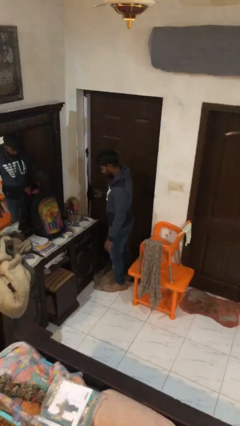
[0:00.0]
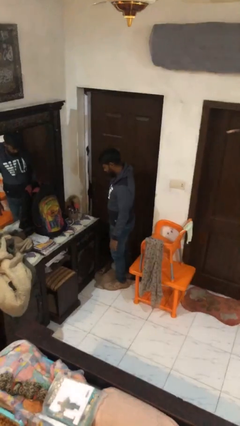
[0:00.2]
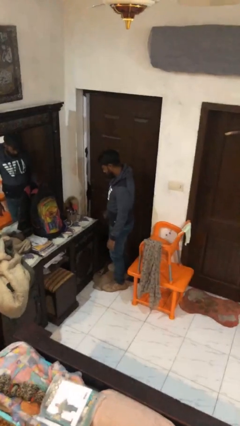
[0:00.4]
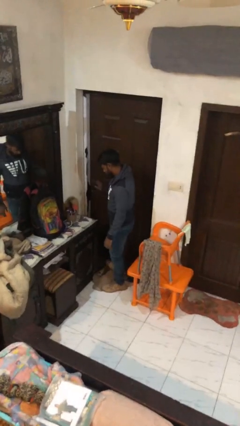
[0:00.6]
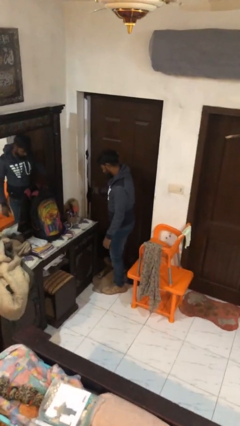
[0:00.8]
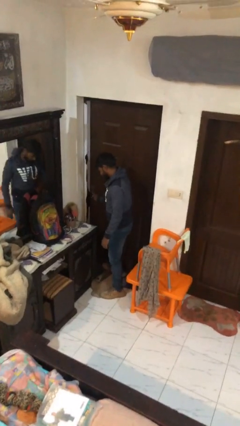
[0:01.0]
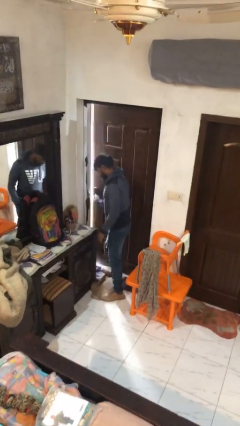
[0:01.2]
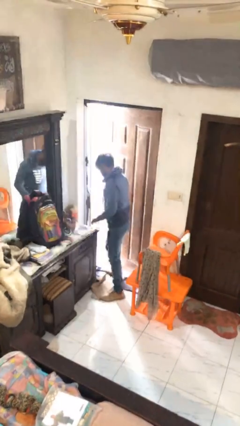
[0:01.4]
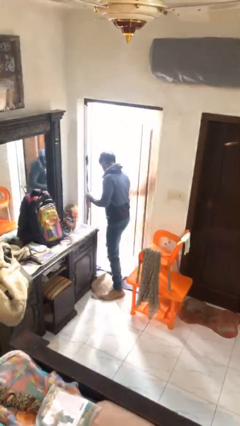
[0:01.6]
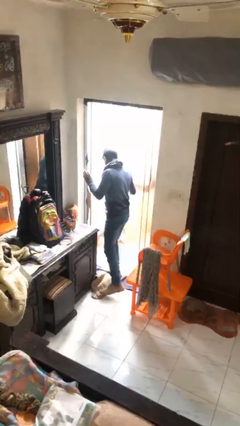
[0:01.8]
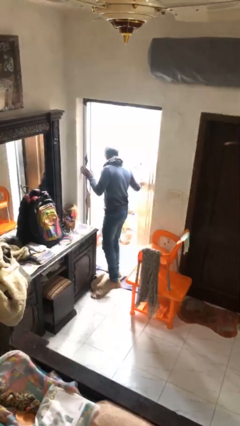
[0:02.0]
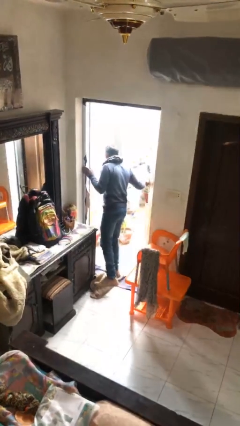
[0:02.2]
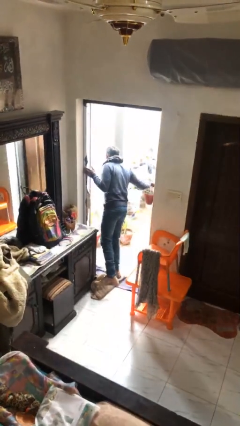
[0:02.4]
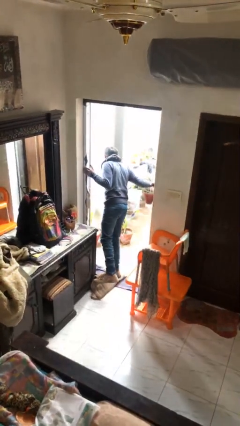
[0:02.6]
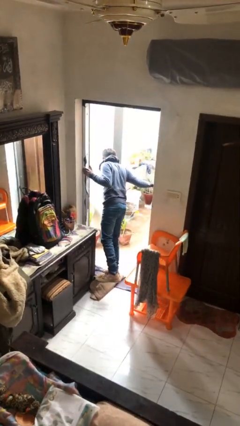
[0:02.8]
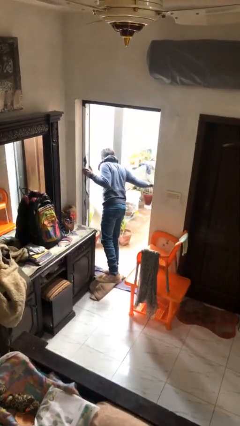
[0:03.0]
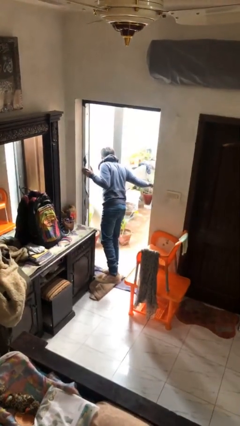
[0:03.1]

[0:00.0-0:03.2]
person opens facility door

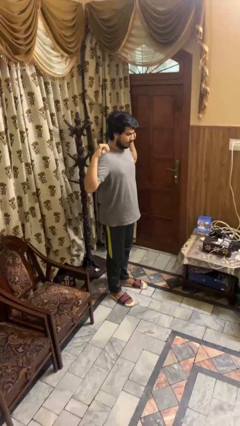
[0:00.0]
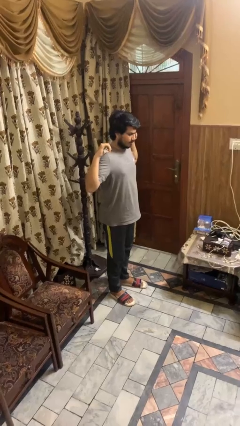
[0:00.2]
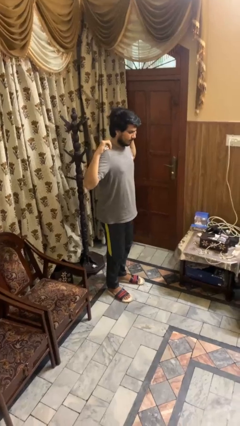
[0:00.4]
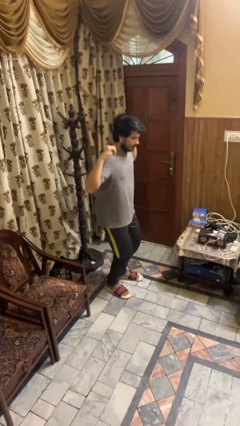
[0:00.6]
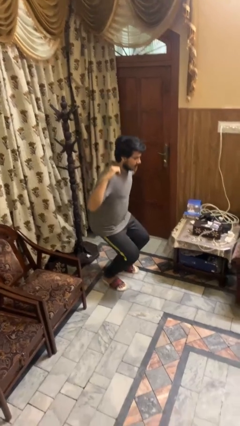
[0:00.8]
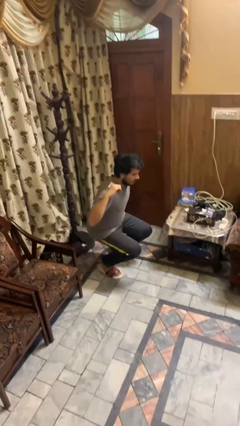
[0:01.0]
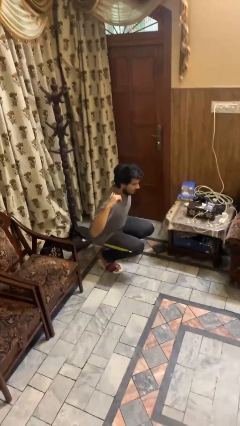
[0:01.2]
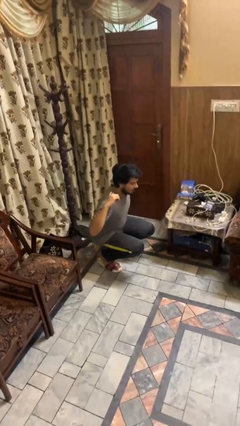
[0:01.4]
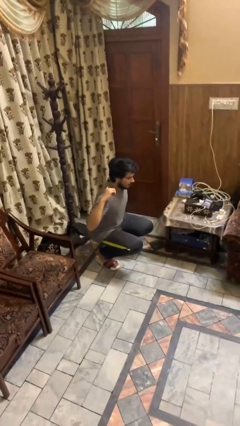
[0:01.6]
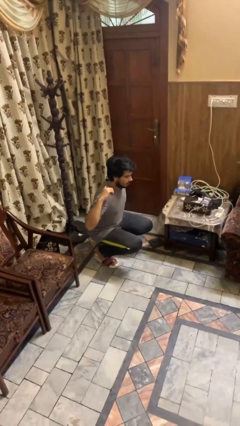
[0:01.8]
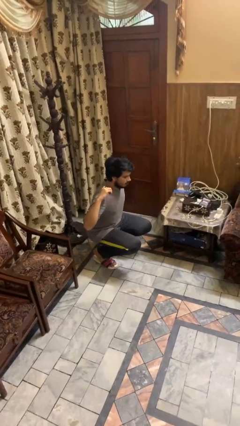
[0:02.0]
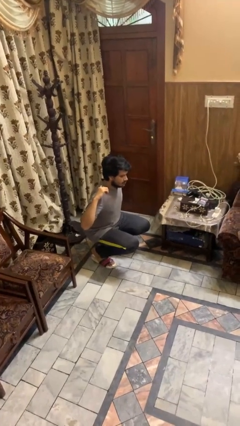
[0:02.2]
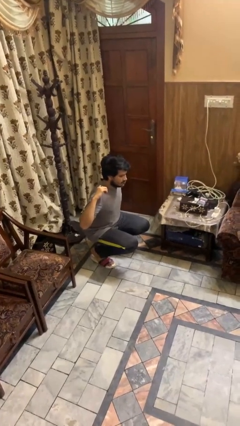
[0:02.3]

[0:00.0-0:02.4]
person squats

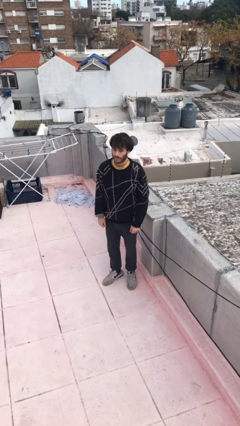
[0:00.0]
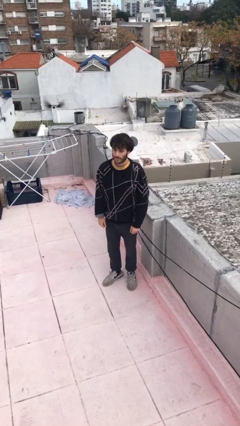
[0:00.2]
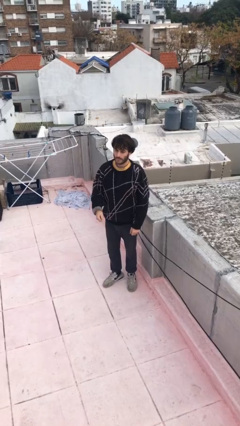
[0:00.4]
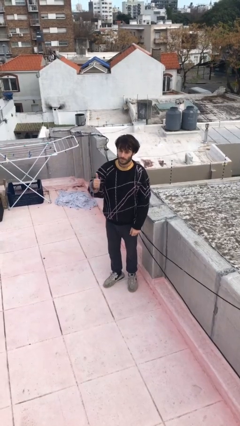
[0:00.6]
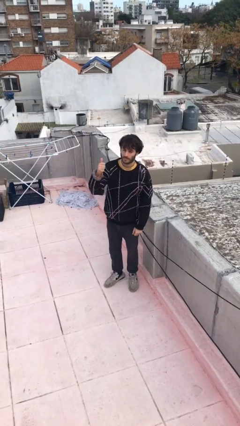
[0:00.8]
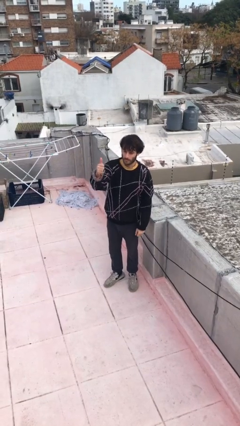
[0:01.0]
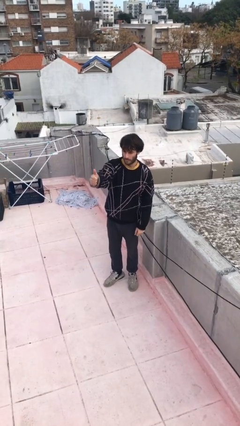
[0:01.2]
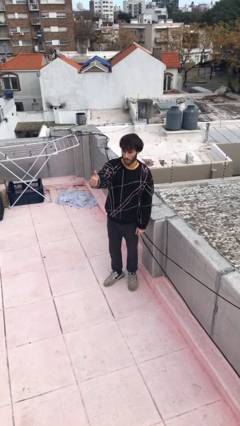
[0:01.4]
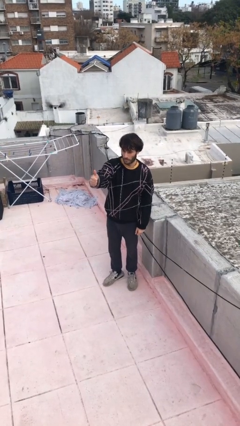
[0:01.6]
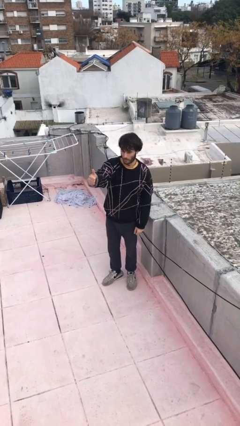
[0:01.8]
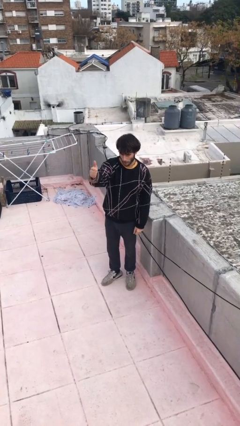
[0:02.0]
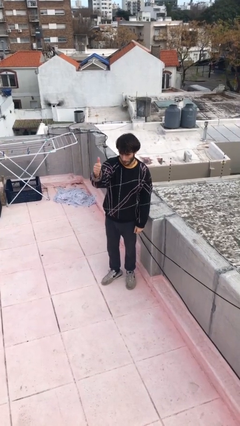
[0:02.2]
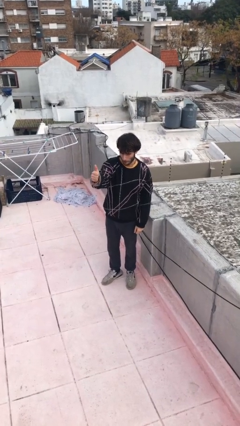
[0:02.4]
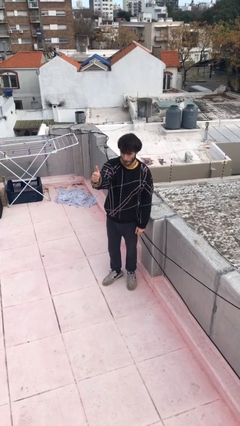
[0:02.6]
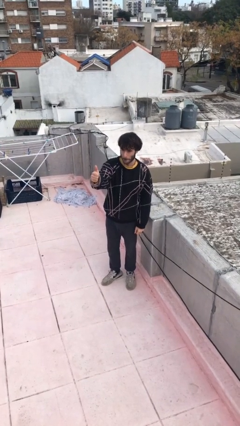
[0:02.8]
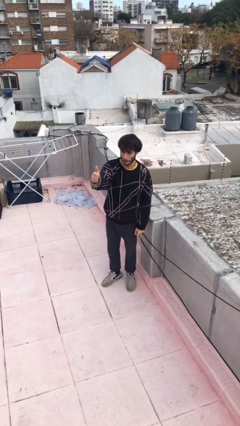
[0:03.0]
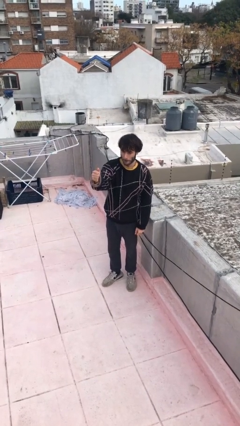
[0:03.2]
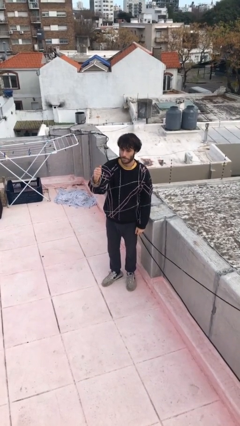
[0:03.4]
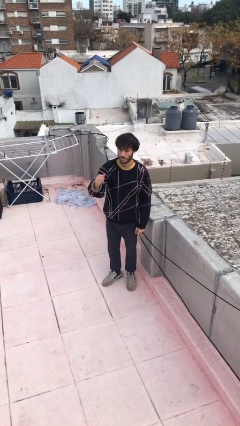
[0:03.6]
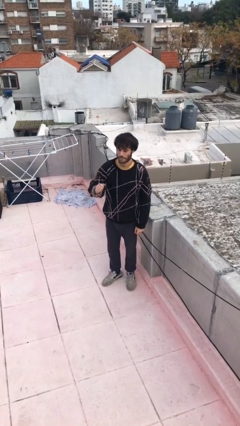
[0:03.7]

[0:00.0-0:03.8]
person gestures thumbs up

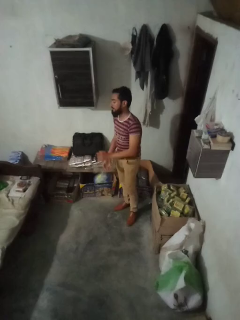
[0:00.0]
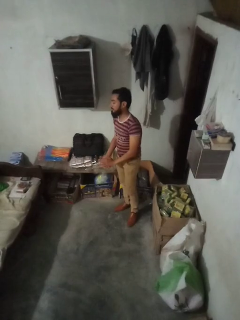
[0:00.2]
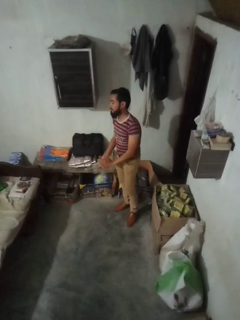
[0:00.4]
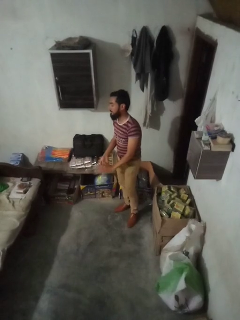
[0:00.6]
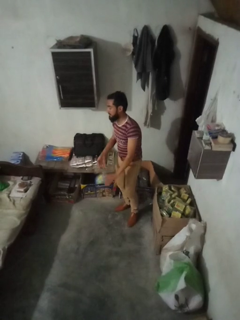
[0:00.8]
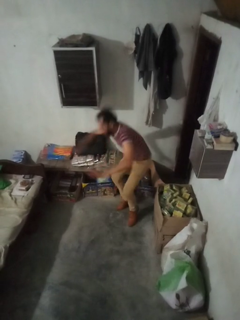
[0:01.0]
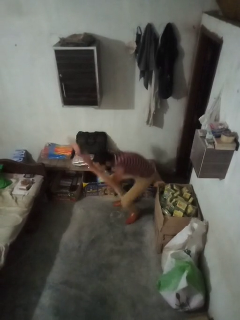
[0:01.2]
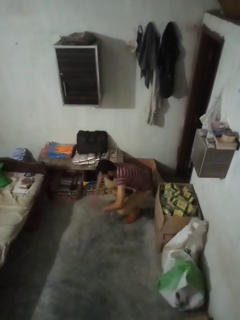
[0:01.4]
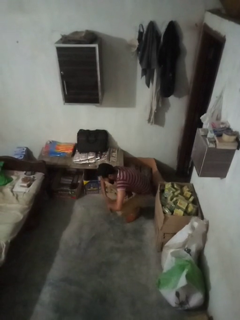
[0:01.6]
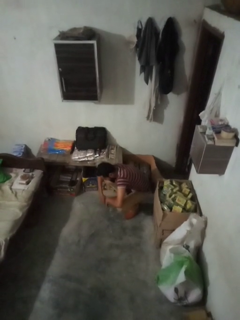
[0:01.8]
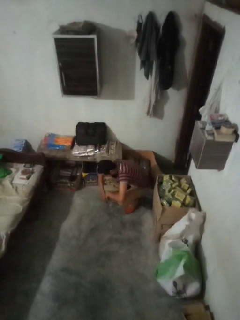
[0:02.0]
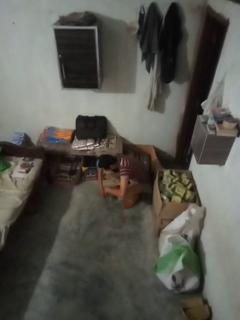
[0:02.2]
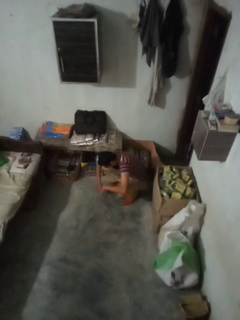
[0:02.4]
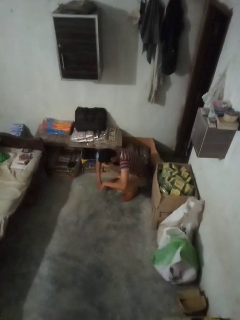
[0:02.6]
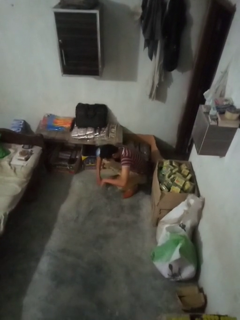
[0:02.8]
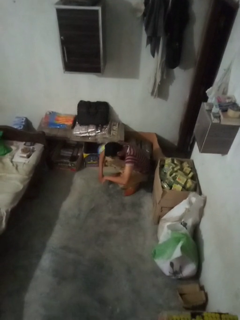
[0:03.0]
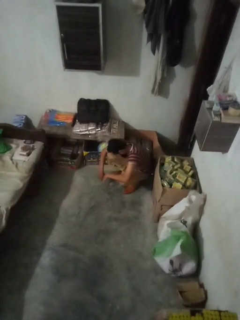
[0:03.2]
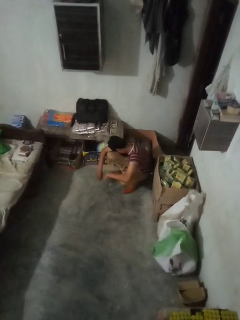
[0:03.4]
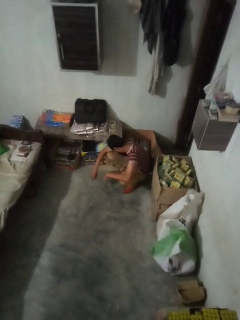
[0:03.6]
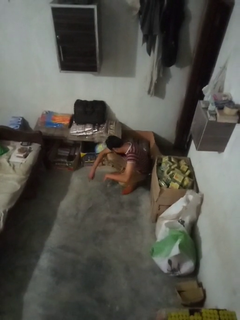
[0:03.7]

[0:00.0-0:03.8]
person trips on object on floor

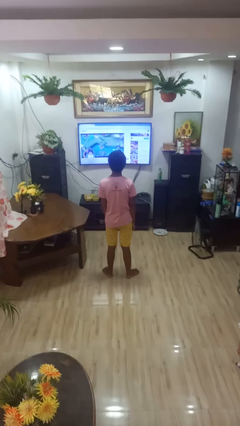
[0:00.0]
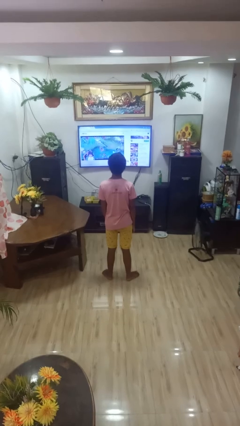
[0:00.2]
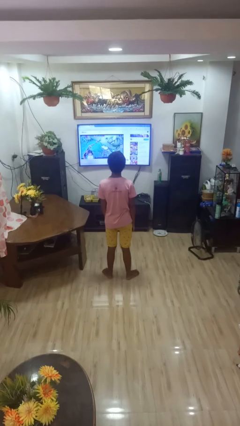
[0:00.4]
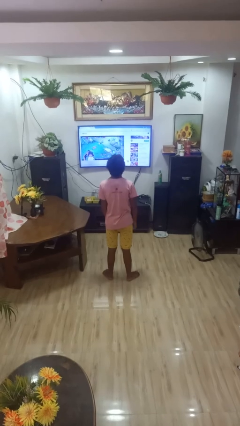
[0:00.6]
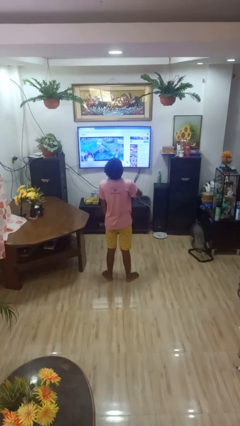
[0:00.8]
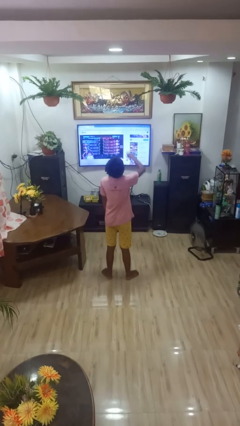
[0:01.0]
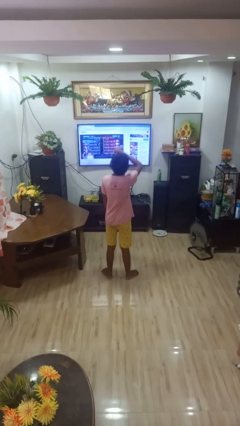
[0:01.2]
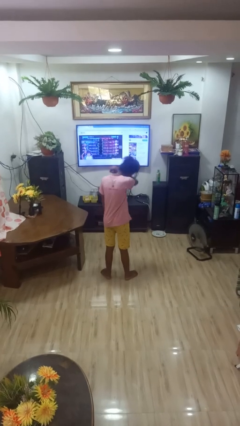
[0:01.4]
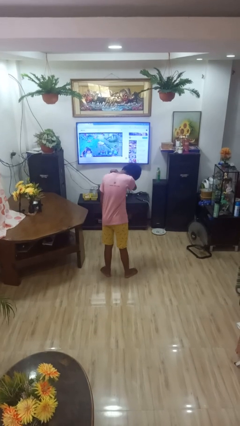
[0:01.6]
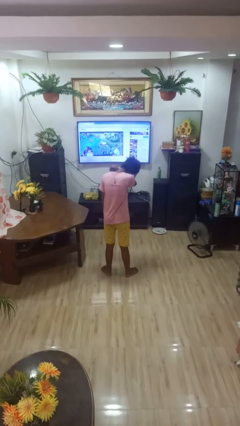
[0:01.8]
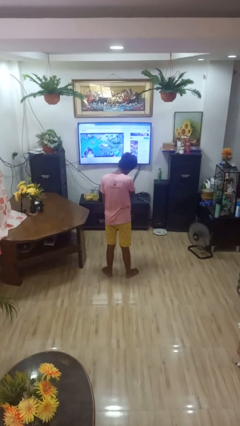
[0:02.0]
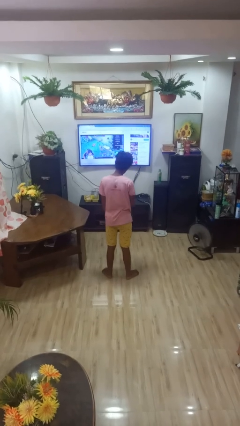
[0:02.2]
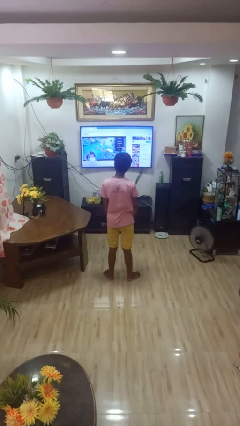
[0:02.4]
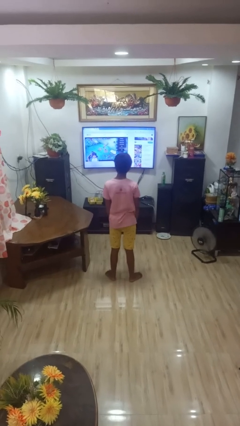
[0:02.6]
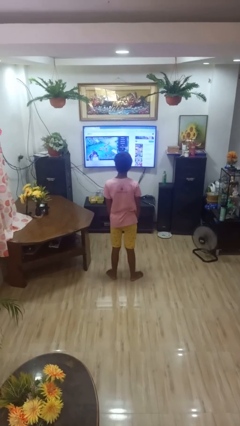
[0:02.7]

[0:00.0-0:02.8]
person sneezes into arm

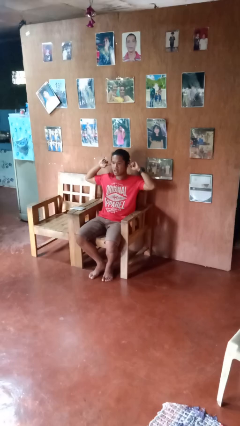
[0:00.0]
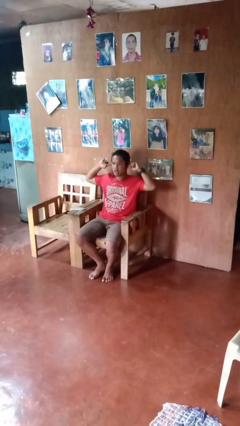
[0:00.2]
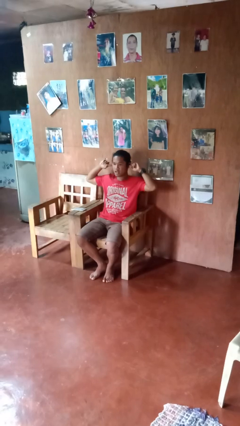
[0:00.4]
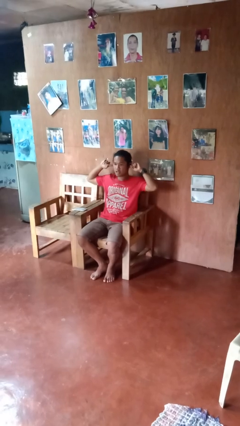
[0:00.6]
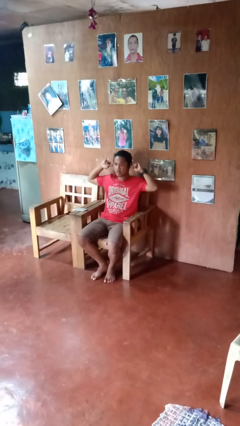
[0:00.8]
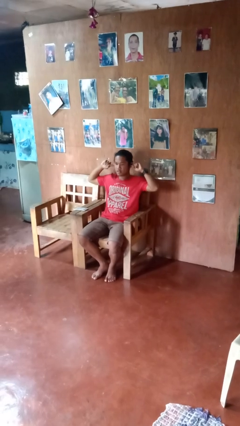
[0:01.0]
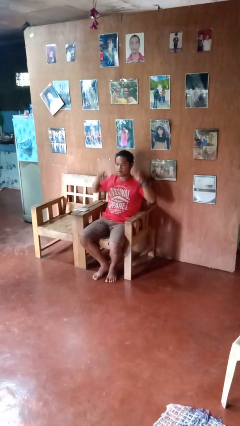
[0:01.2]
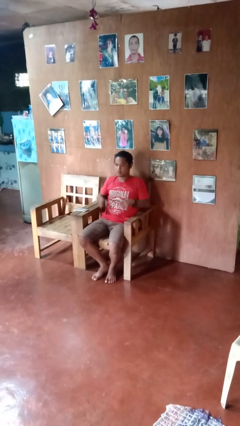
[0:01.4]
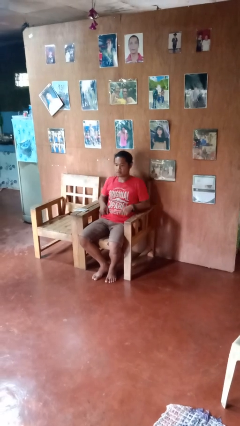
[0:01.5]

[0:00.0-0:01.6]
person puts fingers in ear

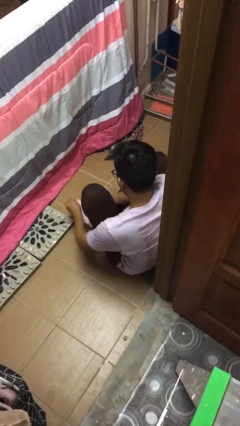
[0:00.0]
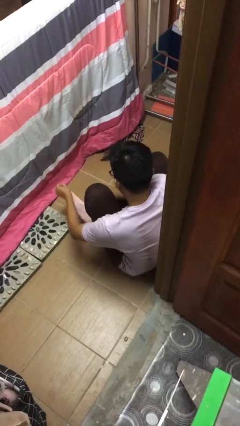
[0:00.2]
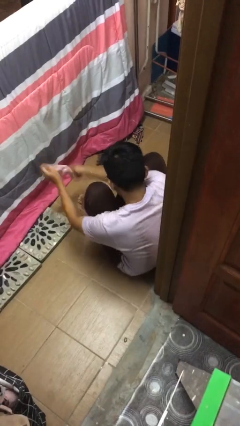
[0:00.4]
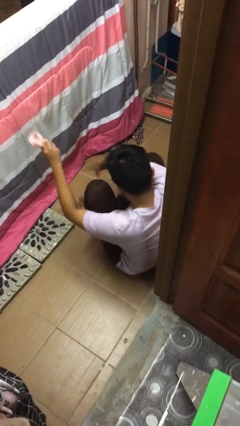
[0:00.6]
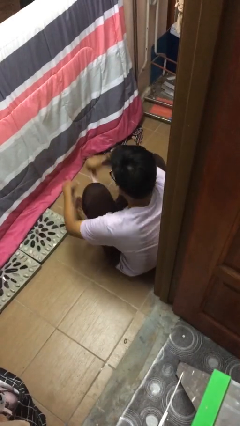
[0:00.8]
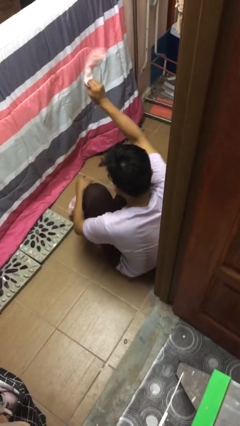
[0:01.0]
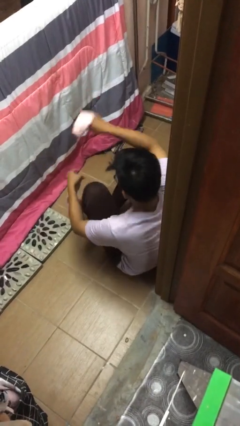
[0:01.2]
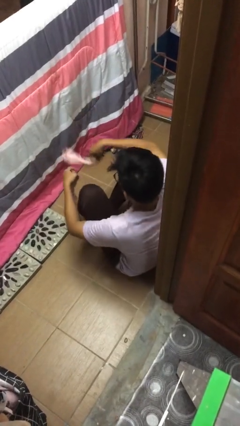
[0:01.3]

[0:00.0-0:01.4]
person takes off socks
